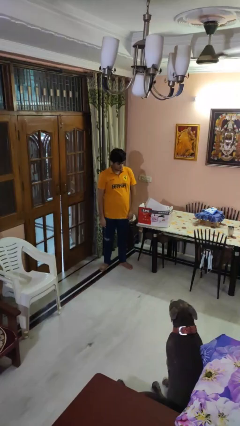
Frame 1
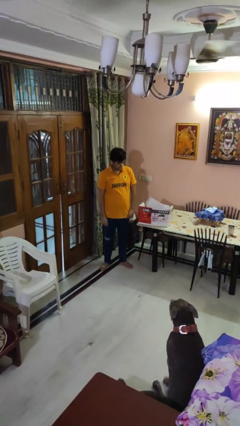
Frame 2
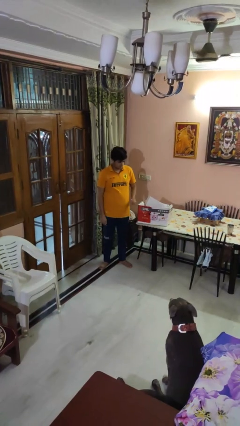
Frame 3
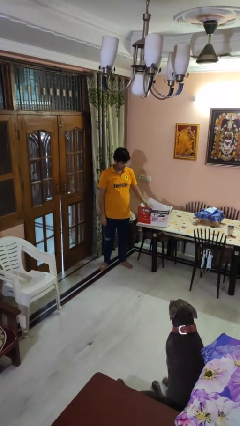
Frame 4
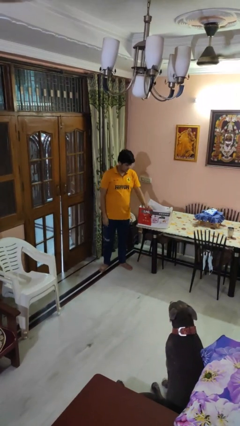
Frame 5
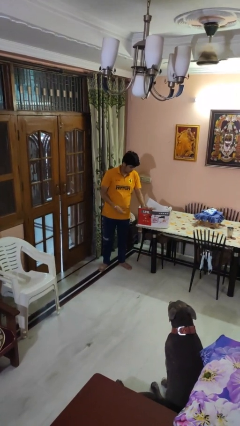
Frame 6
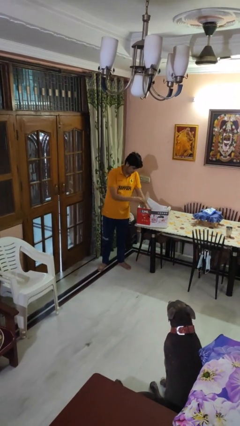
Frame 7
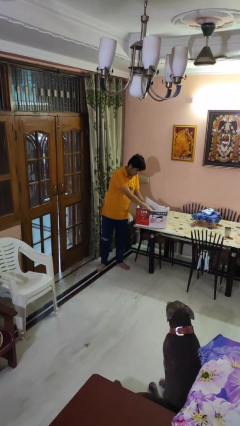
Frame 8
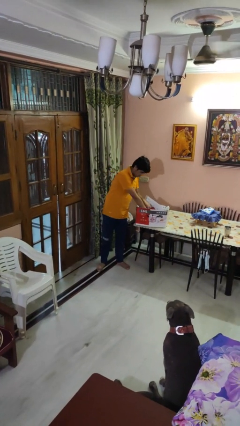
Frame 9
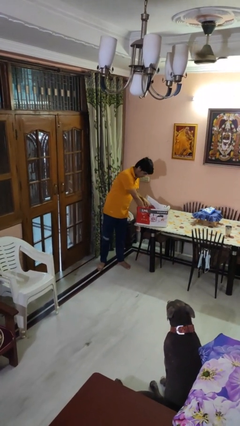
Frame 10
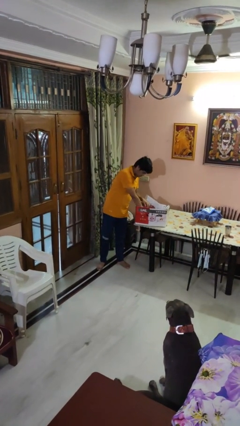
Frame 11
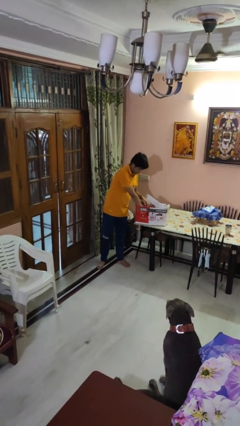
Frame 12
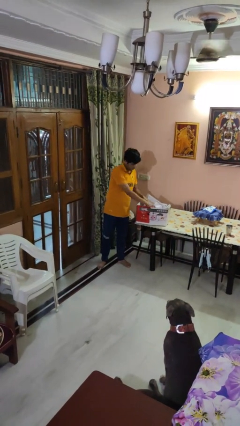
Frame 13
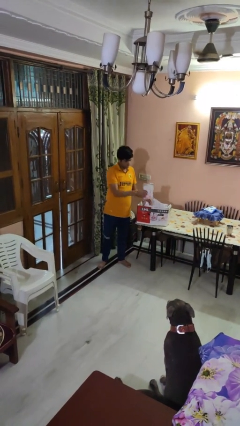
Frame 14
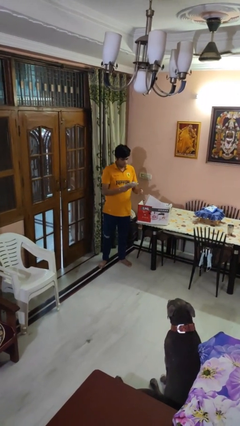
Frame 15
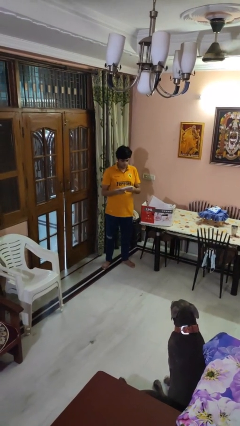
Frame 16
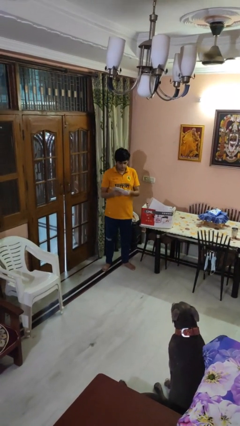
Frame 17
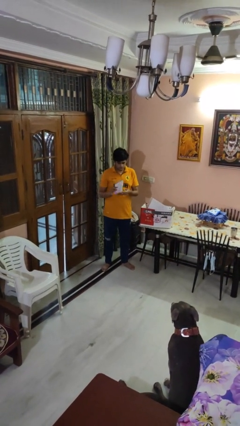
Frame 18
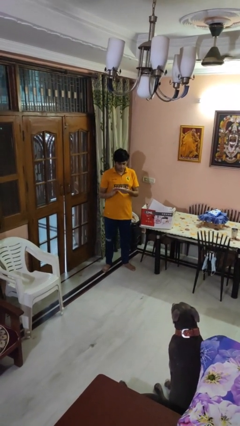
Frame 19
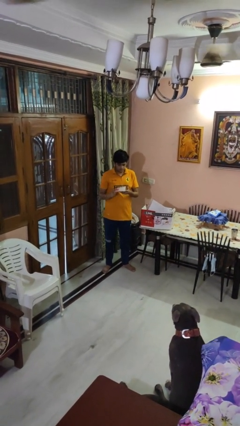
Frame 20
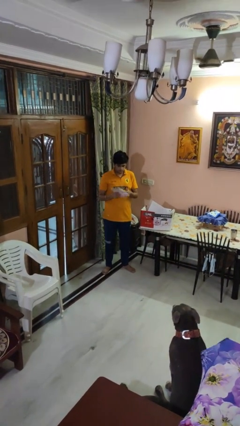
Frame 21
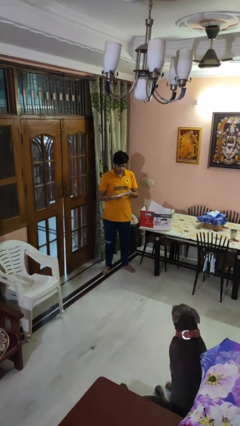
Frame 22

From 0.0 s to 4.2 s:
person takes object from box

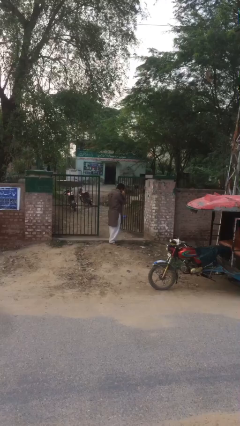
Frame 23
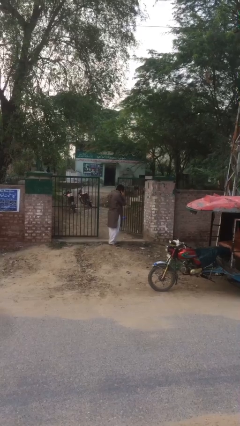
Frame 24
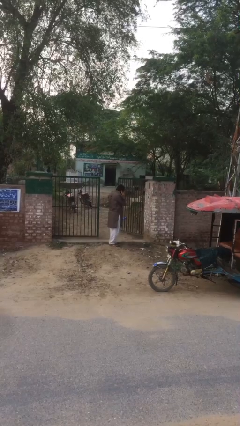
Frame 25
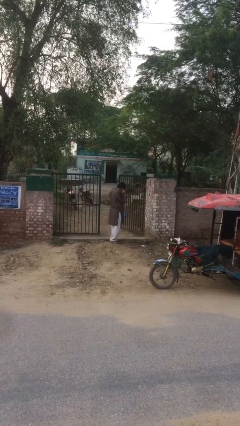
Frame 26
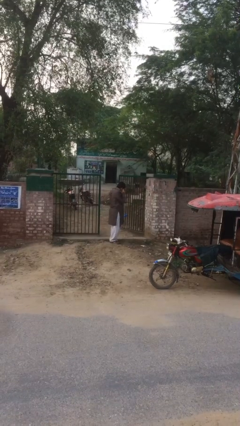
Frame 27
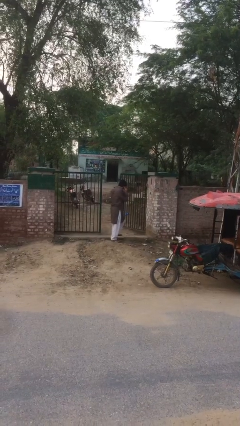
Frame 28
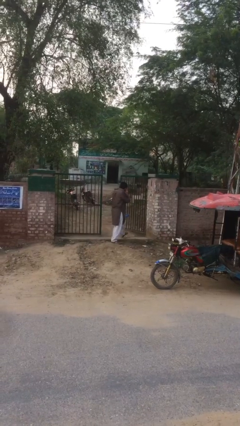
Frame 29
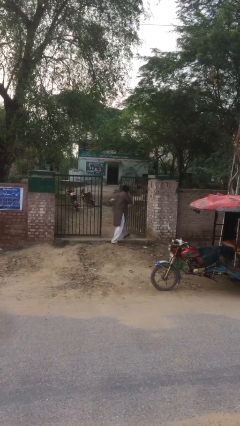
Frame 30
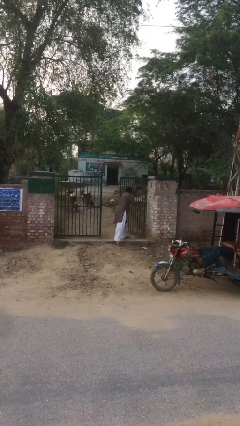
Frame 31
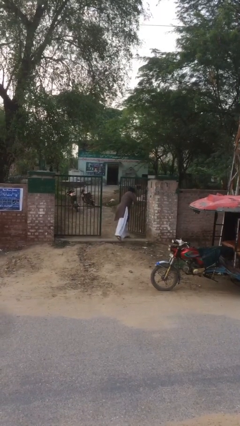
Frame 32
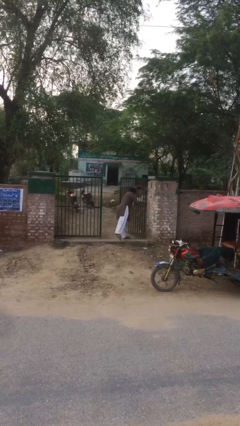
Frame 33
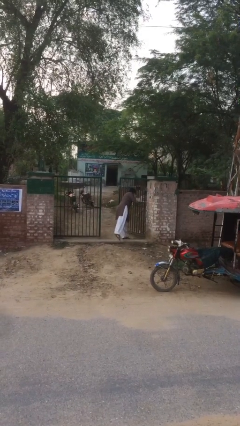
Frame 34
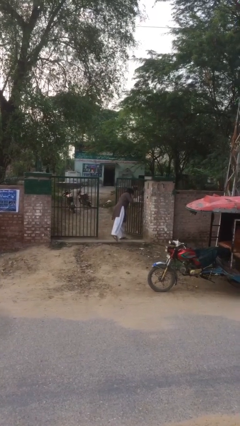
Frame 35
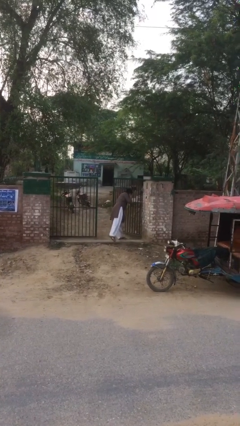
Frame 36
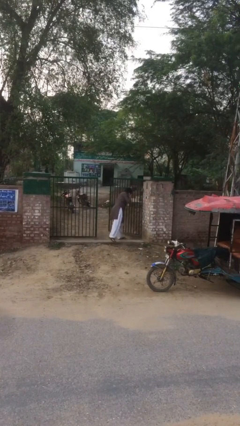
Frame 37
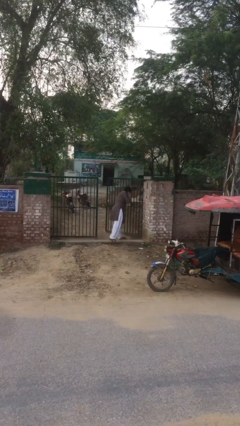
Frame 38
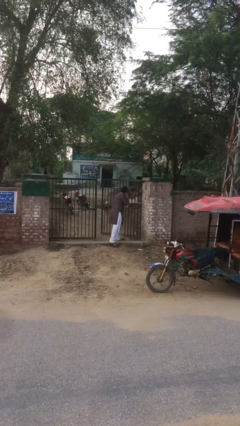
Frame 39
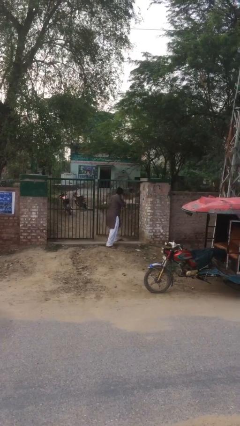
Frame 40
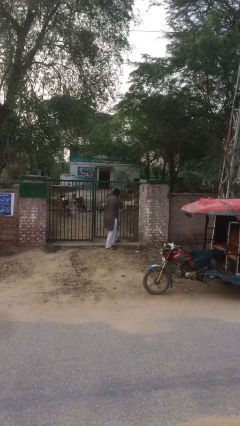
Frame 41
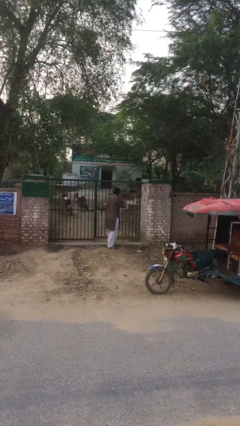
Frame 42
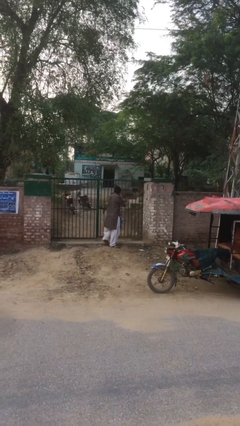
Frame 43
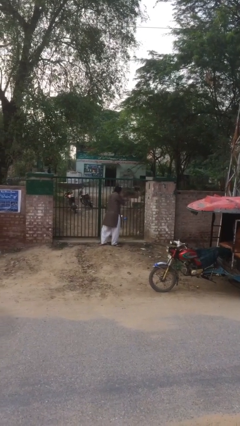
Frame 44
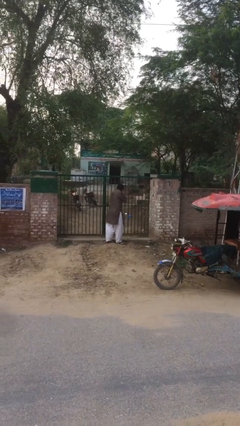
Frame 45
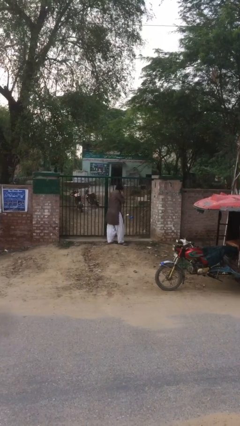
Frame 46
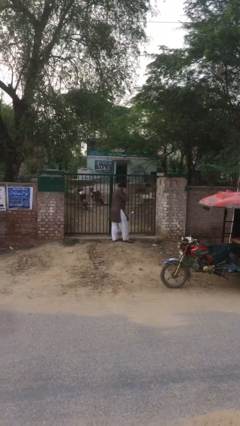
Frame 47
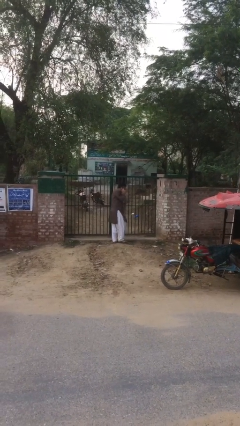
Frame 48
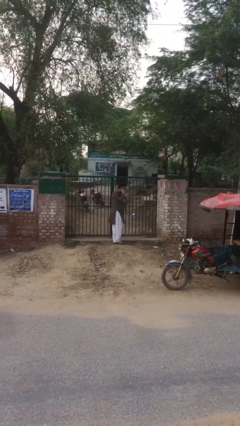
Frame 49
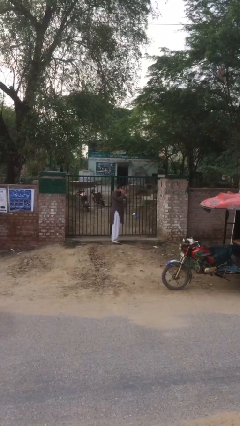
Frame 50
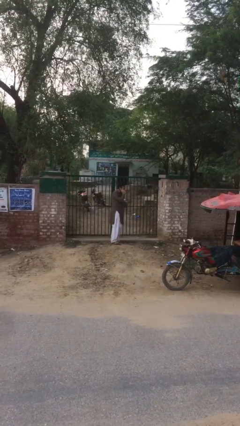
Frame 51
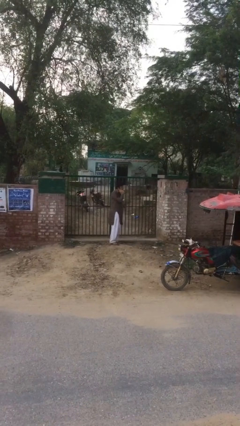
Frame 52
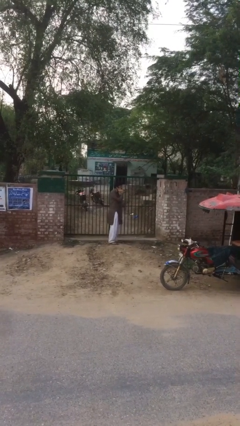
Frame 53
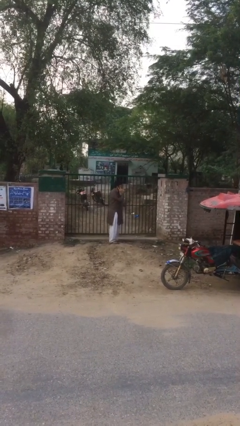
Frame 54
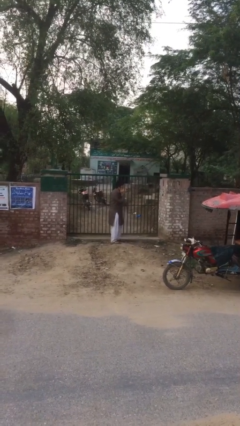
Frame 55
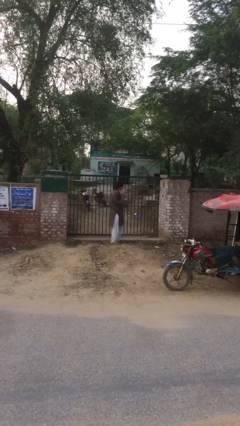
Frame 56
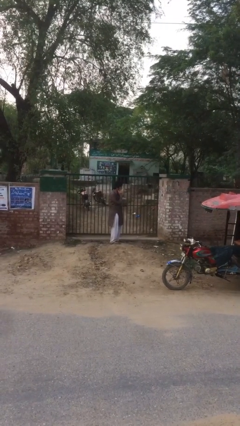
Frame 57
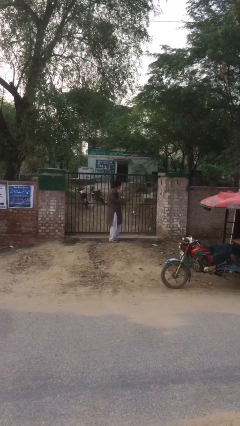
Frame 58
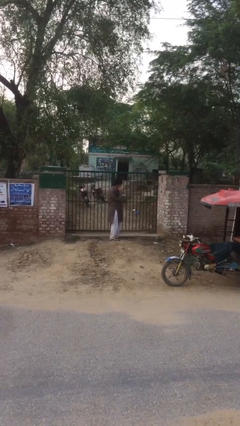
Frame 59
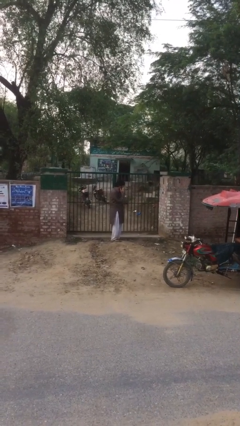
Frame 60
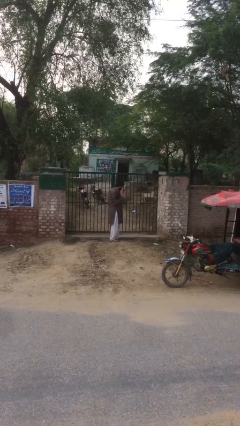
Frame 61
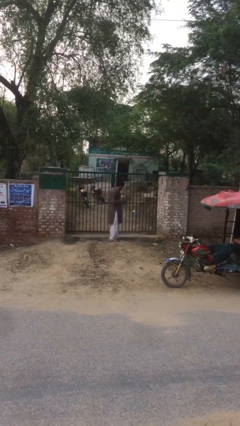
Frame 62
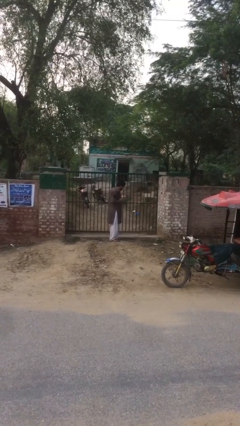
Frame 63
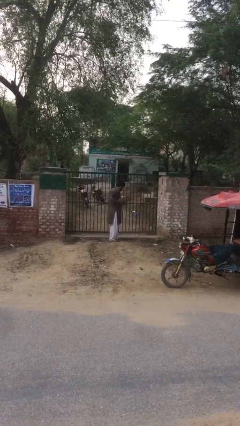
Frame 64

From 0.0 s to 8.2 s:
person closes facility door

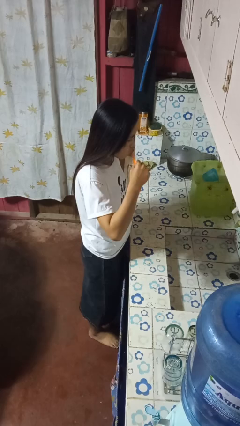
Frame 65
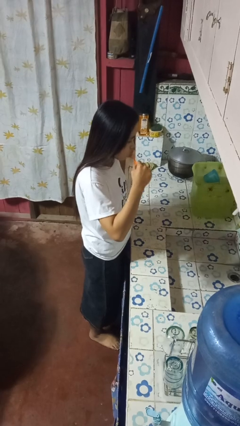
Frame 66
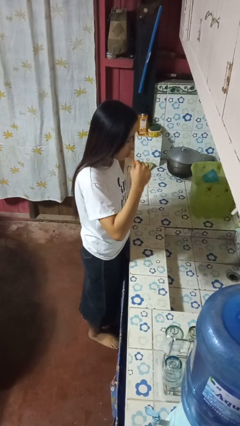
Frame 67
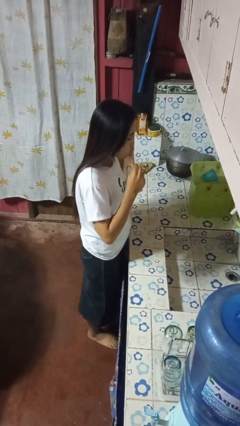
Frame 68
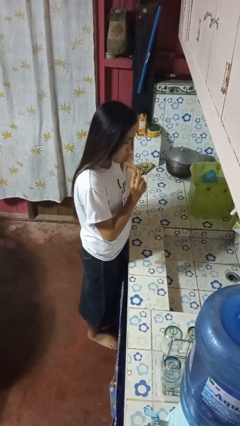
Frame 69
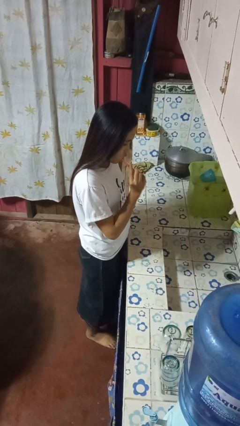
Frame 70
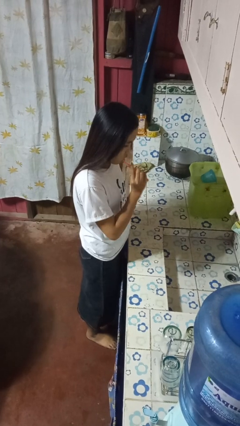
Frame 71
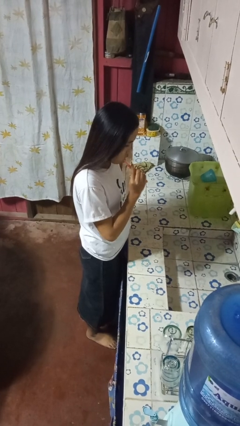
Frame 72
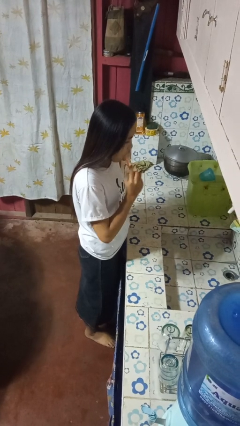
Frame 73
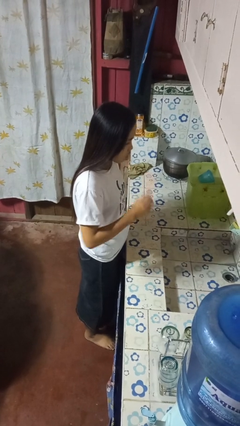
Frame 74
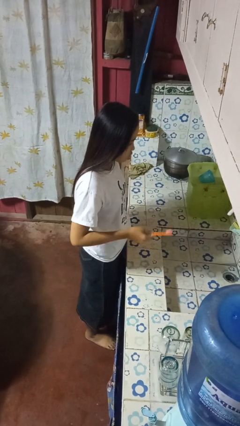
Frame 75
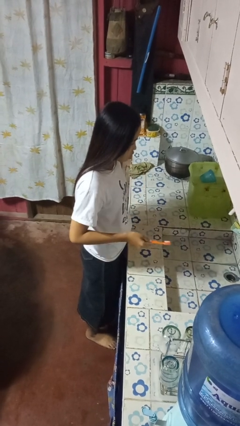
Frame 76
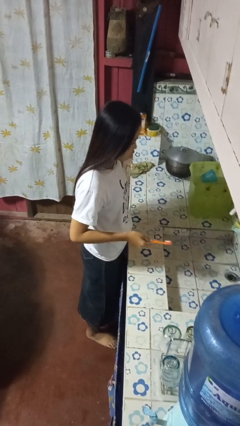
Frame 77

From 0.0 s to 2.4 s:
person brushes teeth

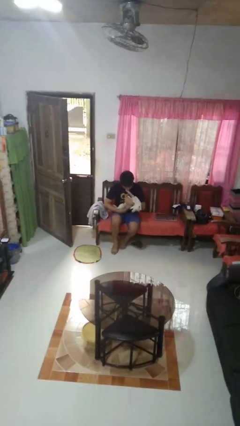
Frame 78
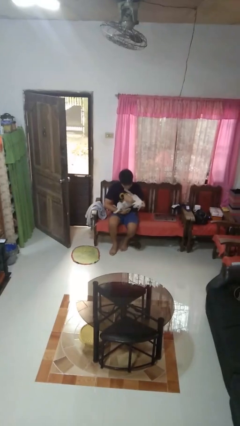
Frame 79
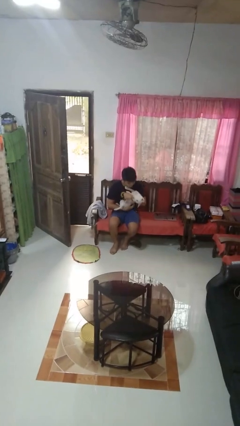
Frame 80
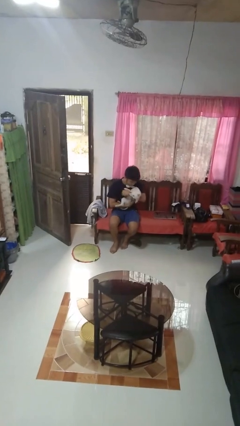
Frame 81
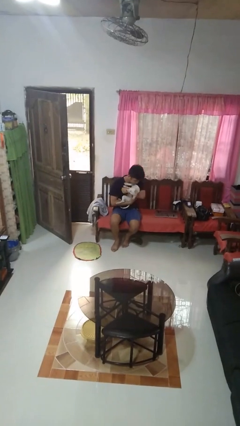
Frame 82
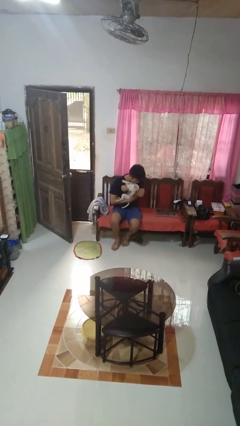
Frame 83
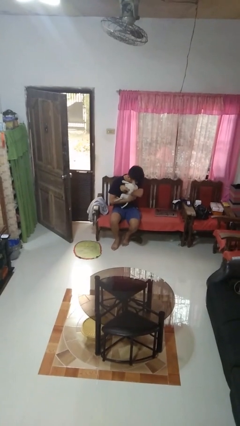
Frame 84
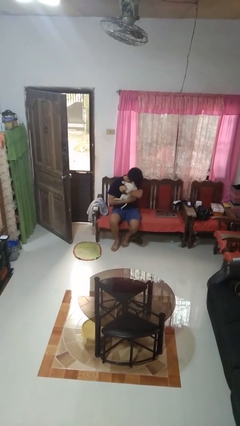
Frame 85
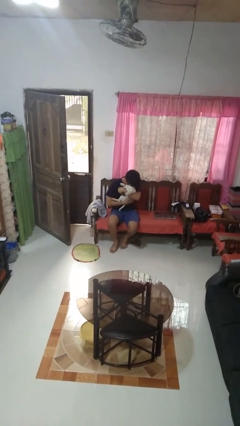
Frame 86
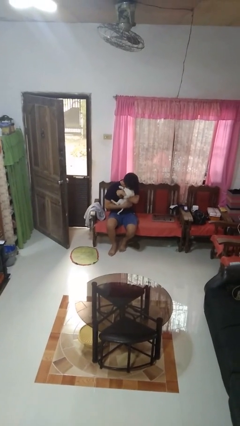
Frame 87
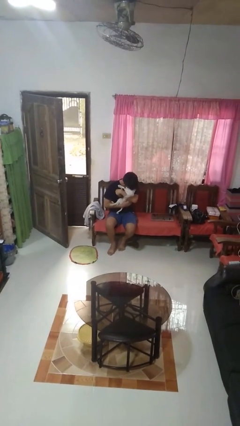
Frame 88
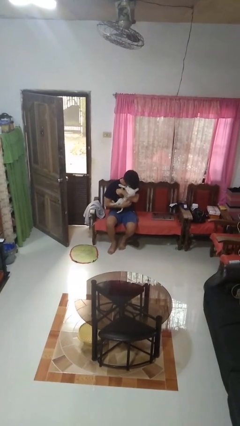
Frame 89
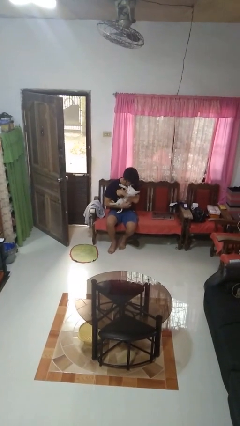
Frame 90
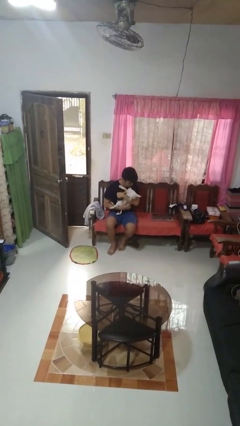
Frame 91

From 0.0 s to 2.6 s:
person hugs dog

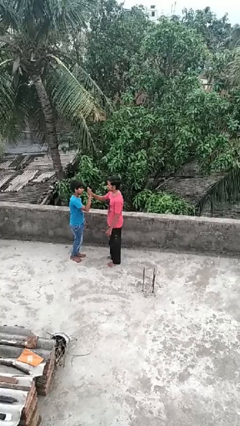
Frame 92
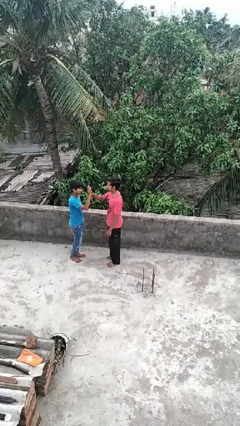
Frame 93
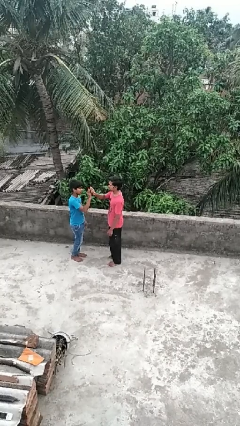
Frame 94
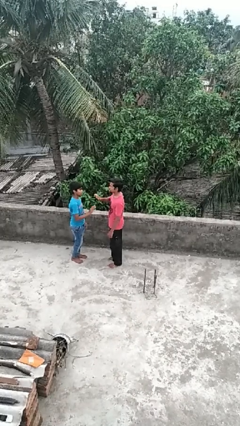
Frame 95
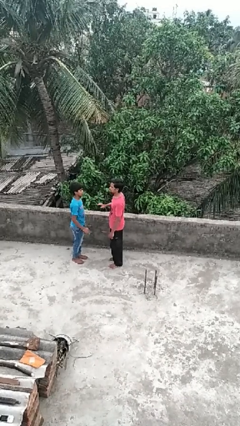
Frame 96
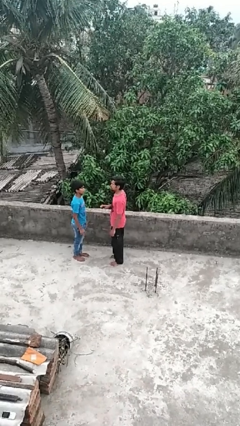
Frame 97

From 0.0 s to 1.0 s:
person highfives hand
